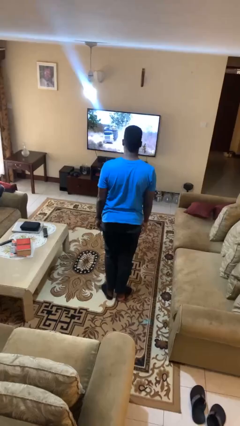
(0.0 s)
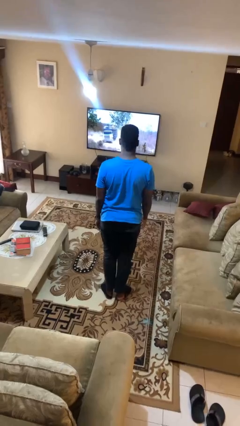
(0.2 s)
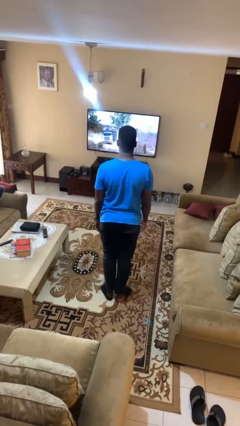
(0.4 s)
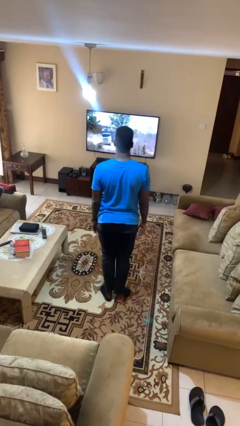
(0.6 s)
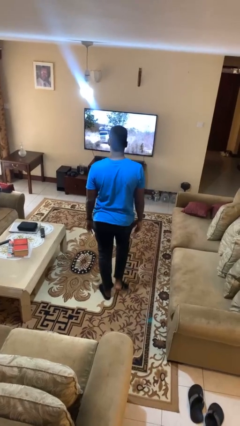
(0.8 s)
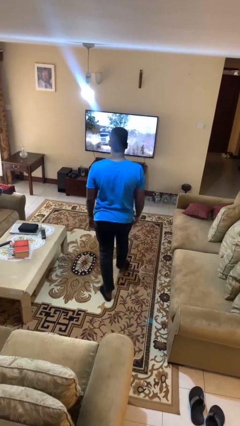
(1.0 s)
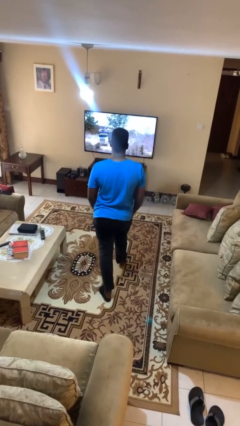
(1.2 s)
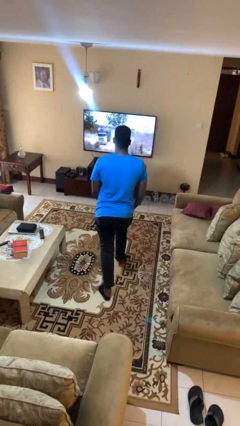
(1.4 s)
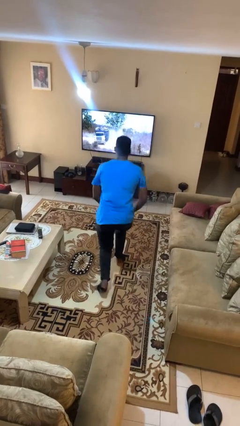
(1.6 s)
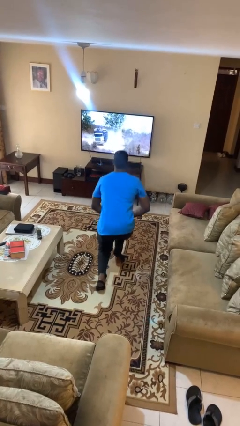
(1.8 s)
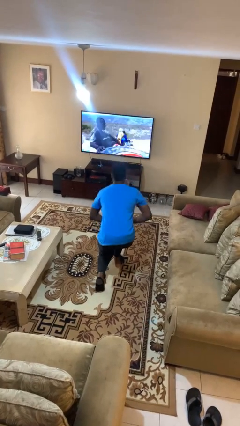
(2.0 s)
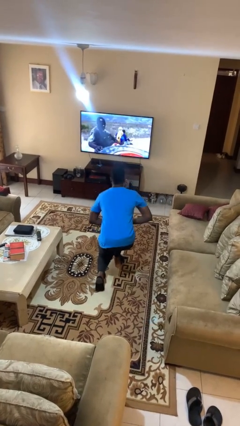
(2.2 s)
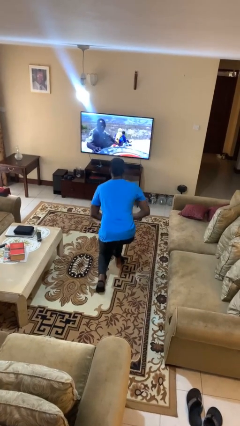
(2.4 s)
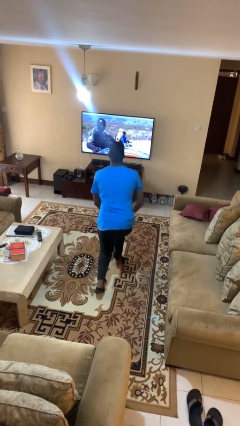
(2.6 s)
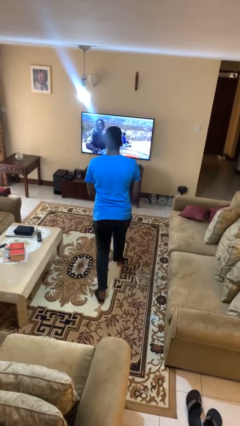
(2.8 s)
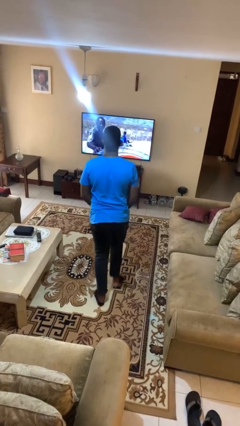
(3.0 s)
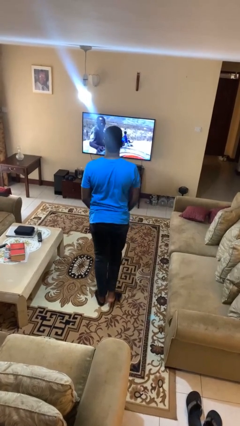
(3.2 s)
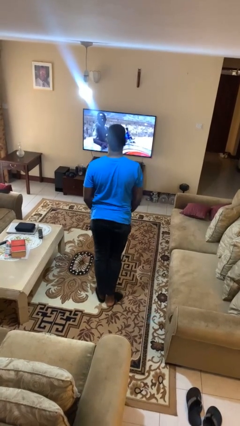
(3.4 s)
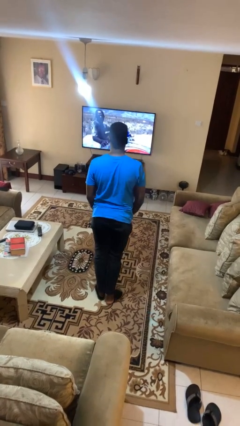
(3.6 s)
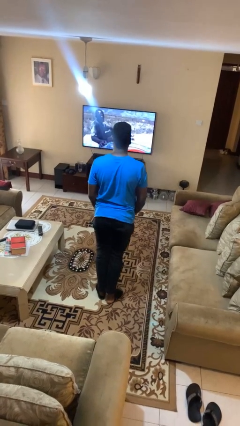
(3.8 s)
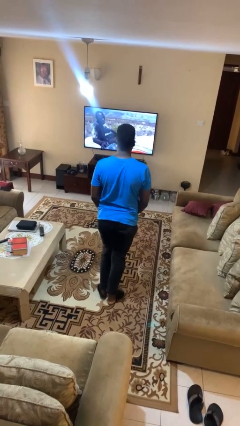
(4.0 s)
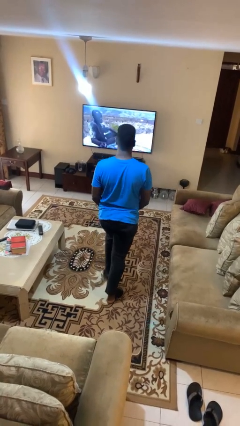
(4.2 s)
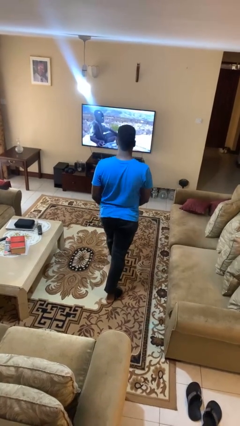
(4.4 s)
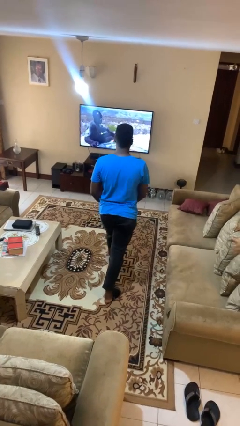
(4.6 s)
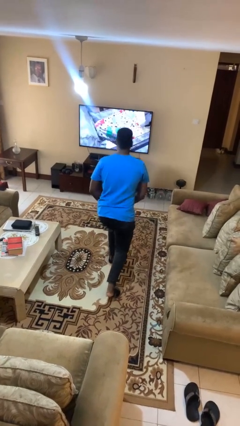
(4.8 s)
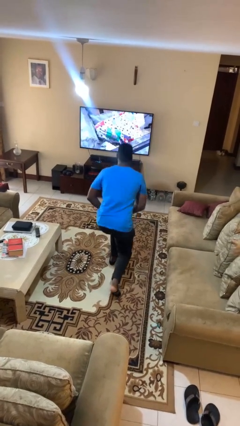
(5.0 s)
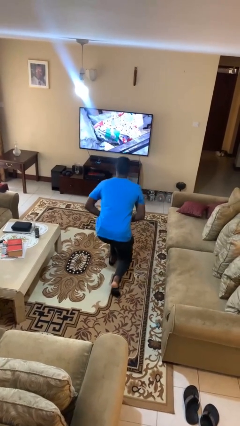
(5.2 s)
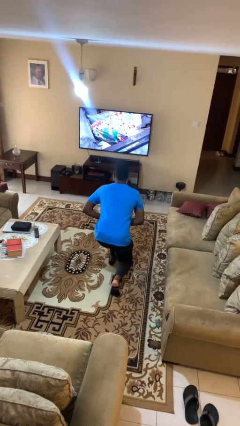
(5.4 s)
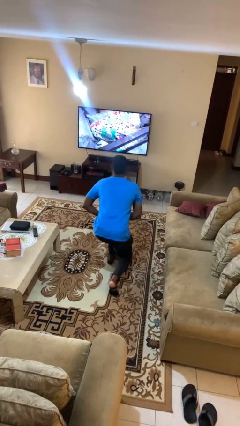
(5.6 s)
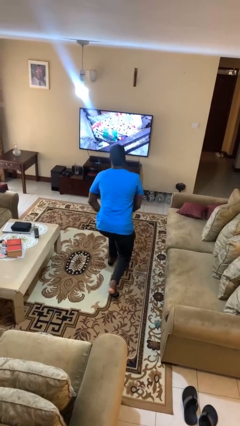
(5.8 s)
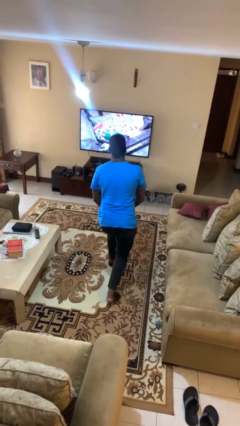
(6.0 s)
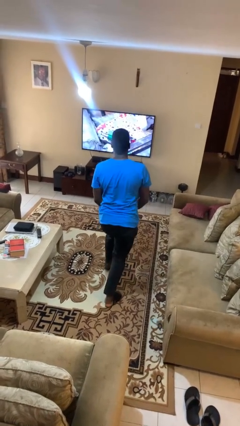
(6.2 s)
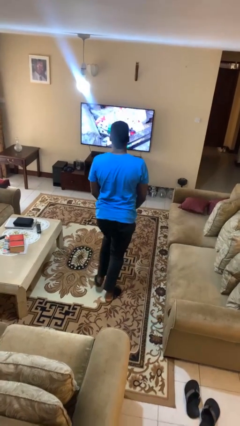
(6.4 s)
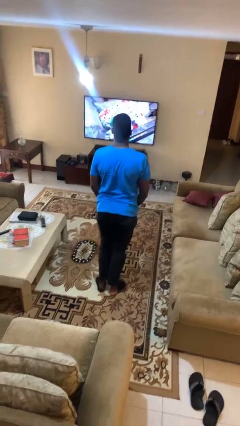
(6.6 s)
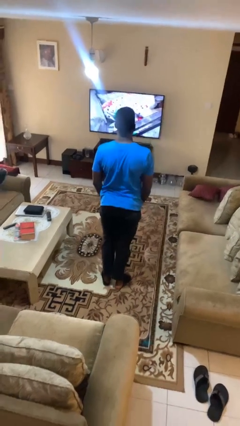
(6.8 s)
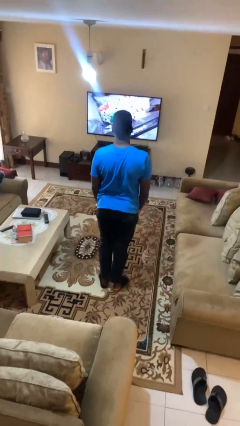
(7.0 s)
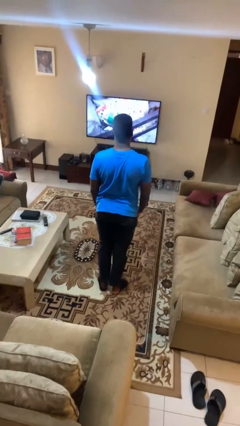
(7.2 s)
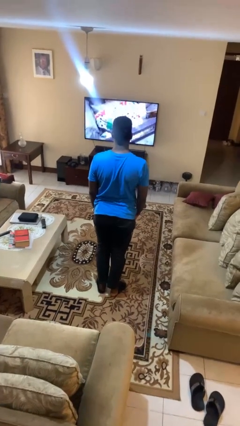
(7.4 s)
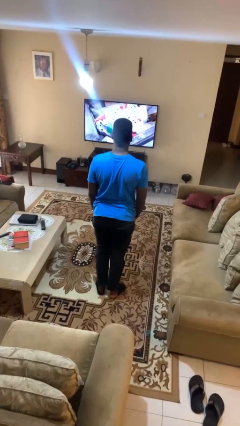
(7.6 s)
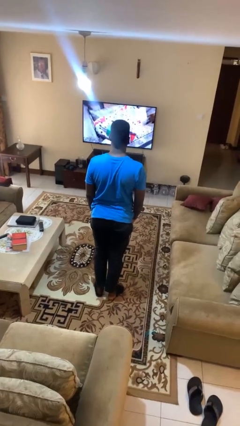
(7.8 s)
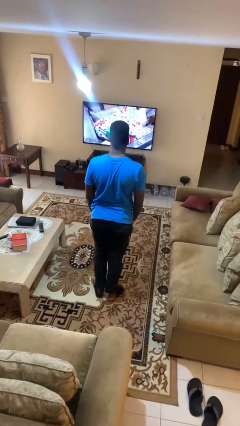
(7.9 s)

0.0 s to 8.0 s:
person exercises with lunges

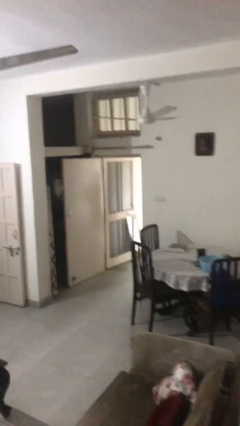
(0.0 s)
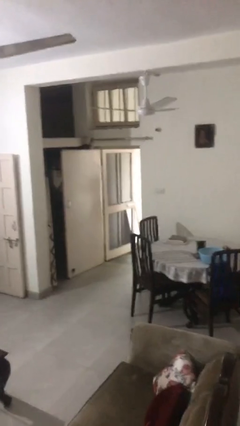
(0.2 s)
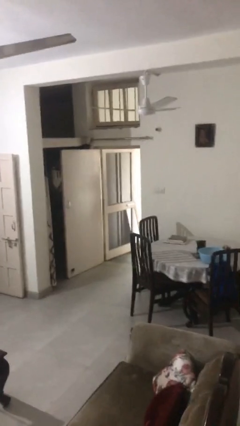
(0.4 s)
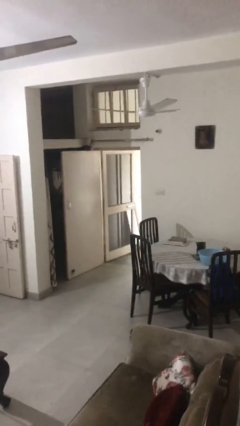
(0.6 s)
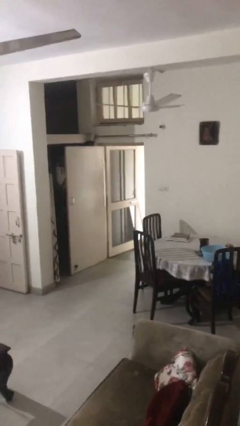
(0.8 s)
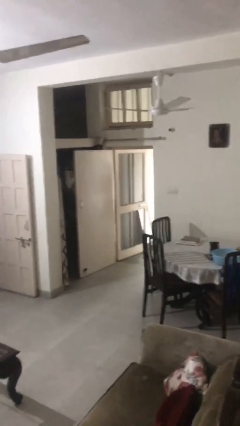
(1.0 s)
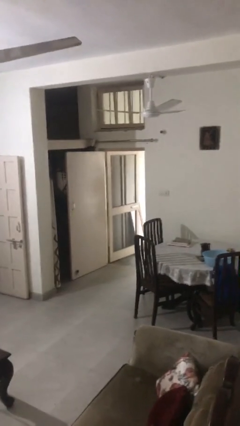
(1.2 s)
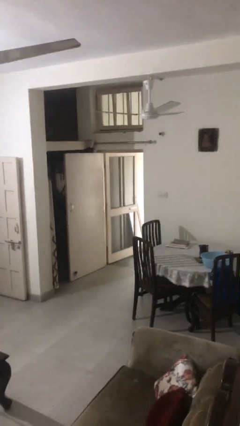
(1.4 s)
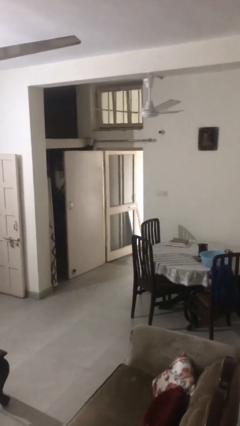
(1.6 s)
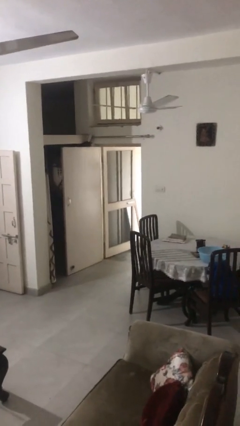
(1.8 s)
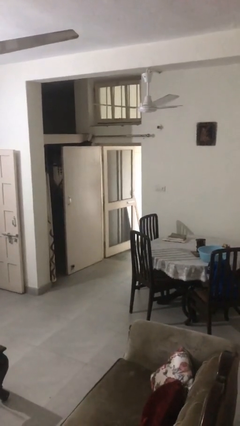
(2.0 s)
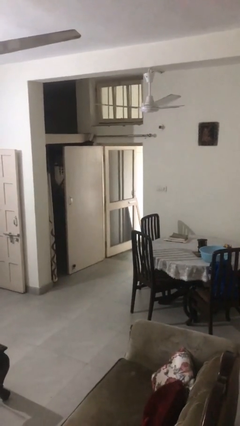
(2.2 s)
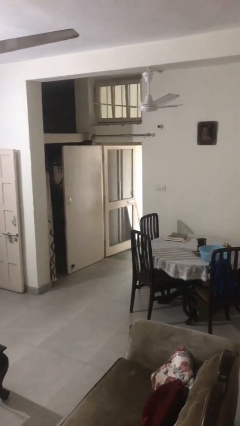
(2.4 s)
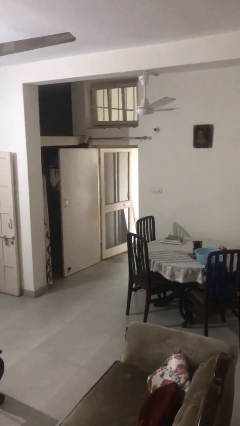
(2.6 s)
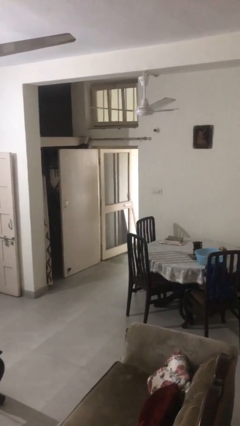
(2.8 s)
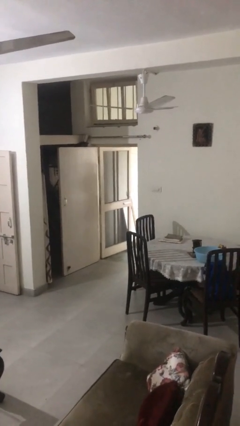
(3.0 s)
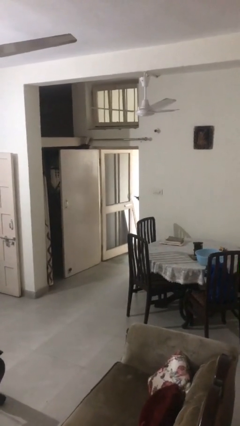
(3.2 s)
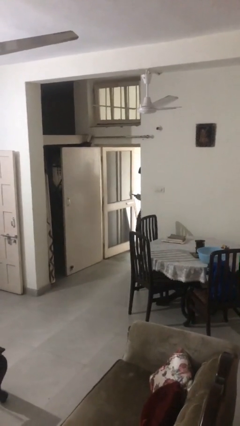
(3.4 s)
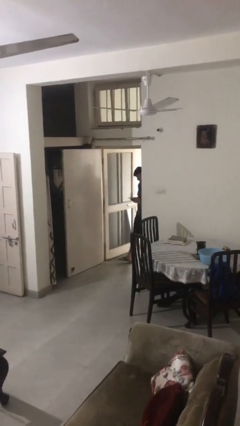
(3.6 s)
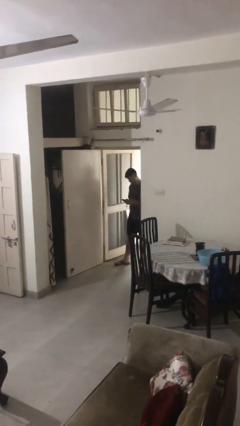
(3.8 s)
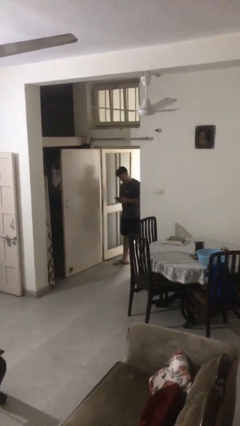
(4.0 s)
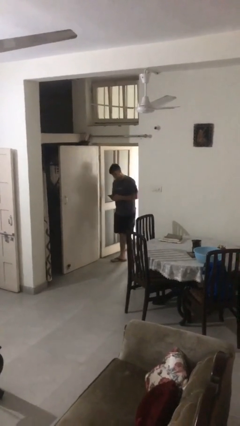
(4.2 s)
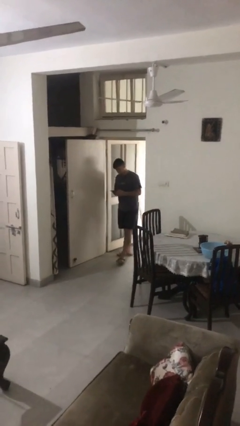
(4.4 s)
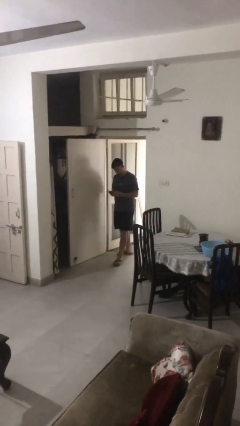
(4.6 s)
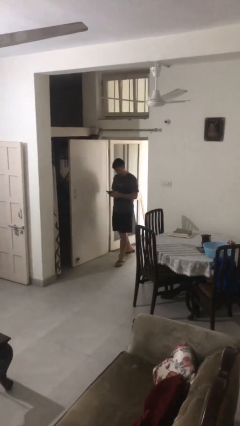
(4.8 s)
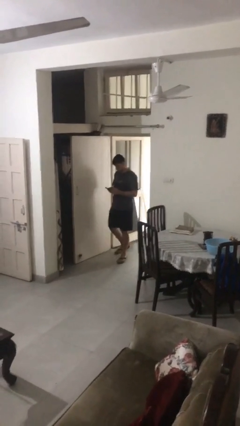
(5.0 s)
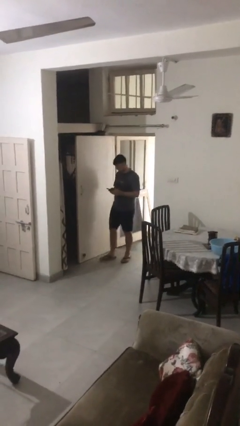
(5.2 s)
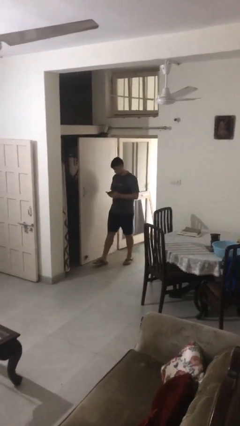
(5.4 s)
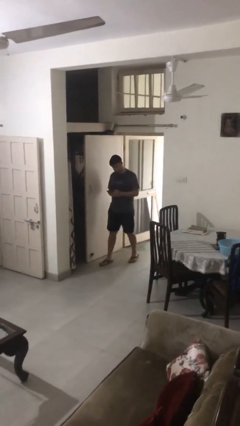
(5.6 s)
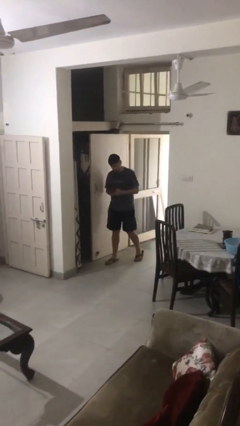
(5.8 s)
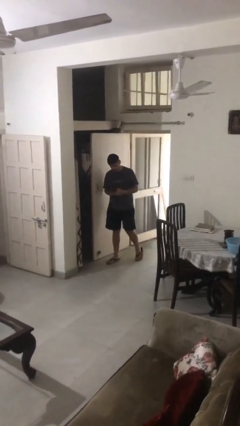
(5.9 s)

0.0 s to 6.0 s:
person enters scene through structure

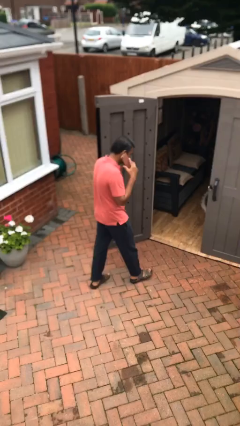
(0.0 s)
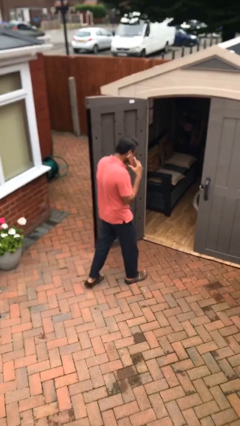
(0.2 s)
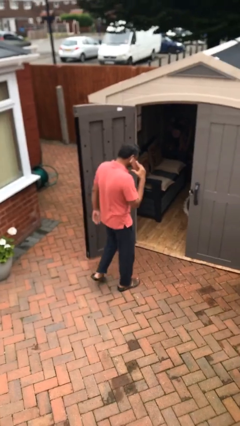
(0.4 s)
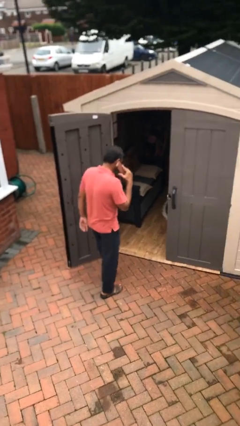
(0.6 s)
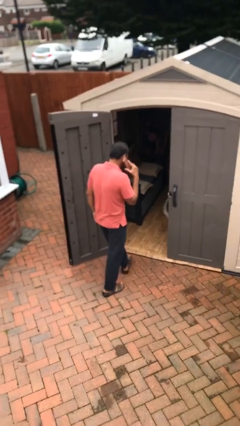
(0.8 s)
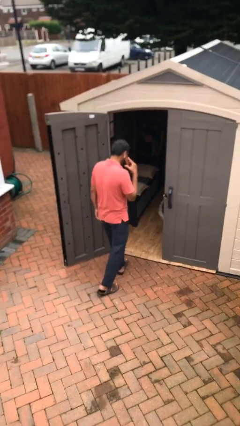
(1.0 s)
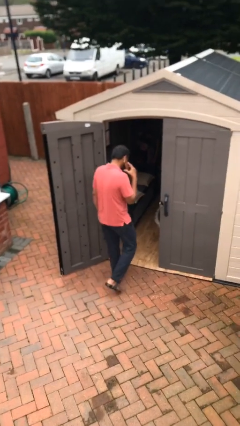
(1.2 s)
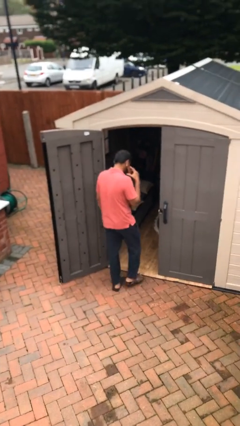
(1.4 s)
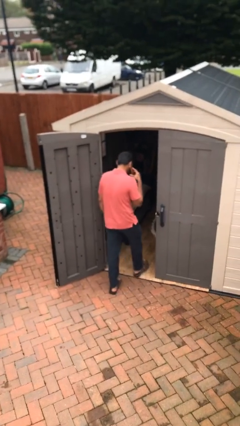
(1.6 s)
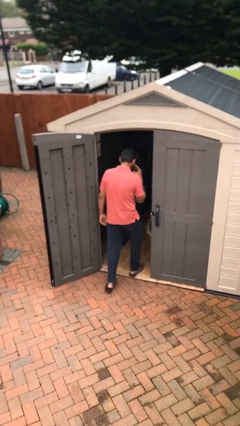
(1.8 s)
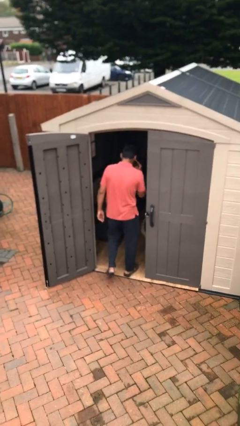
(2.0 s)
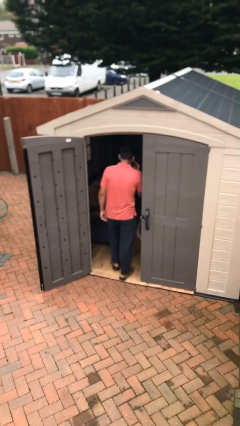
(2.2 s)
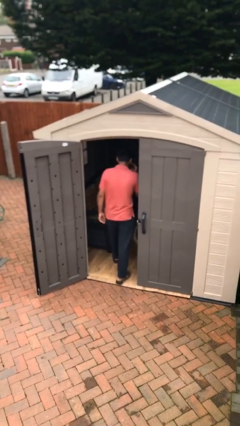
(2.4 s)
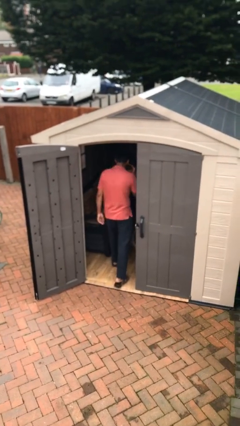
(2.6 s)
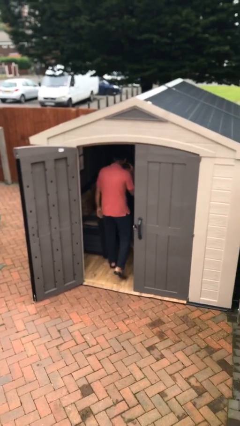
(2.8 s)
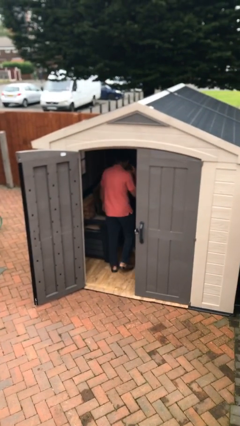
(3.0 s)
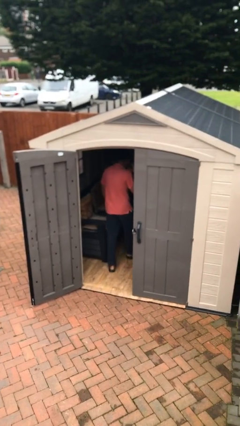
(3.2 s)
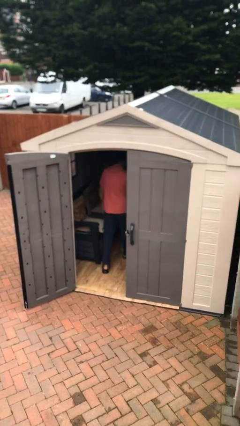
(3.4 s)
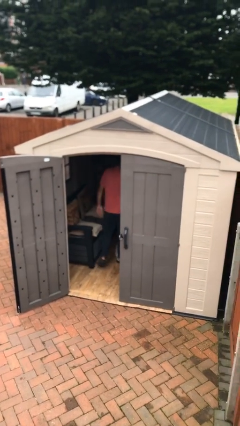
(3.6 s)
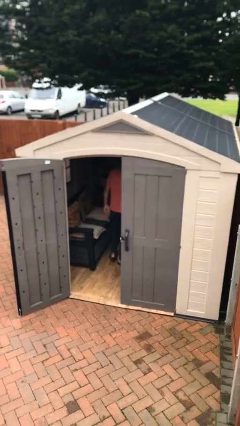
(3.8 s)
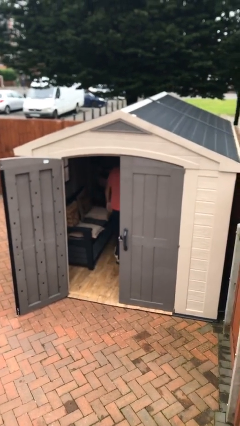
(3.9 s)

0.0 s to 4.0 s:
person exits scene through structure
